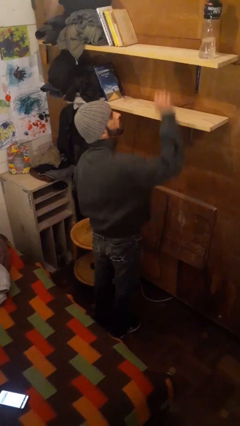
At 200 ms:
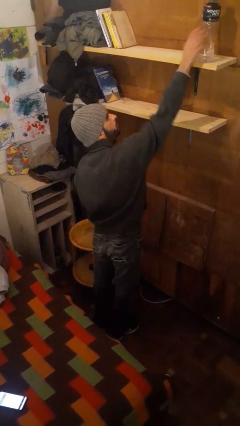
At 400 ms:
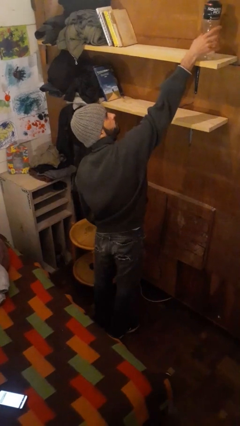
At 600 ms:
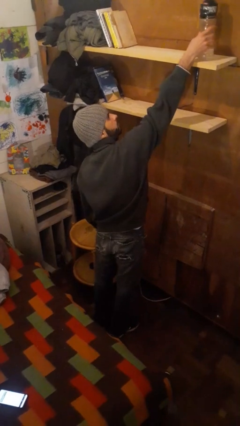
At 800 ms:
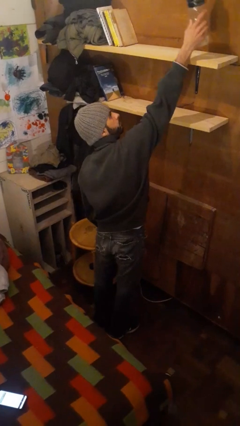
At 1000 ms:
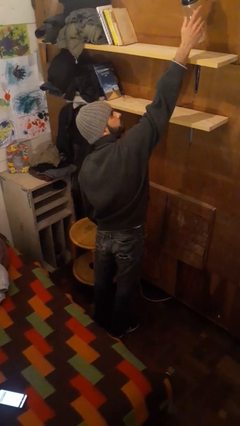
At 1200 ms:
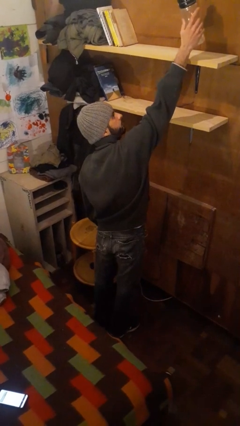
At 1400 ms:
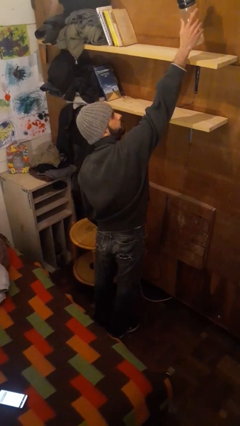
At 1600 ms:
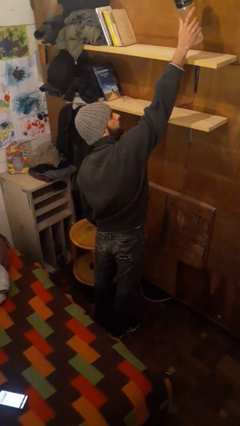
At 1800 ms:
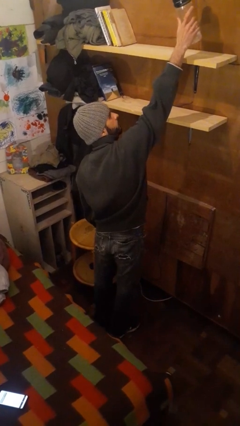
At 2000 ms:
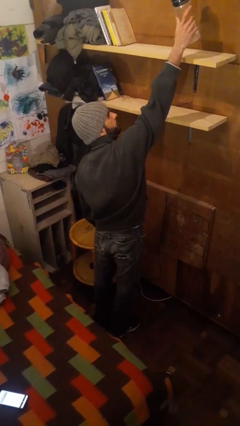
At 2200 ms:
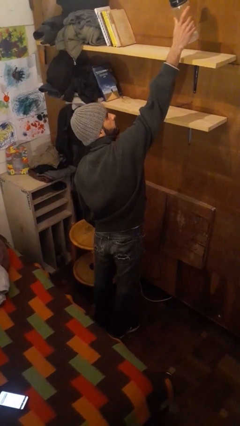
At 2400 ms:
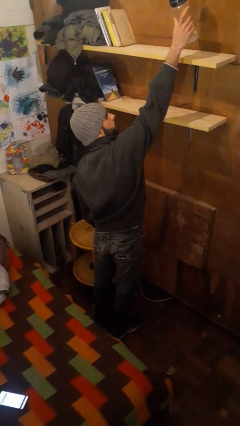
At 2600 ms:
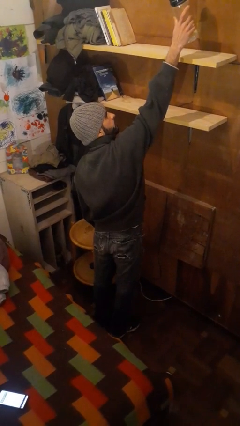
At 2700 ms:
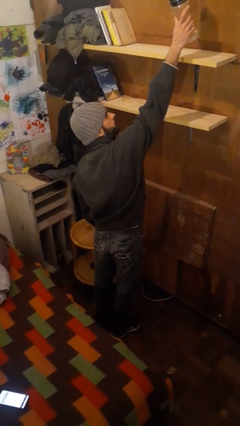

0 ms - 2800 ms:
person picks up object from shelf

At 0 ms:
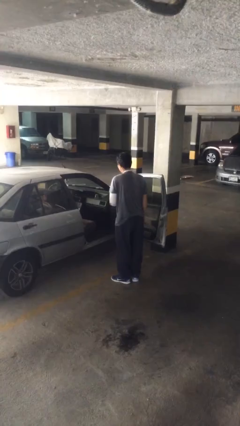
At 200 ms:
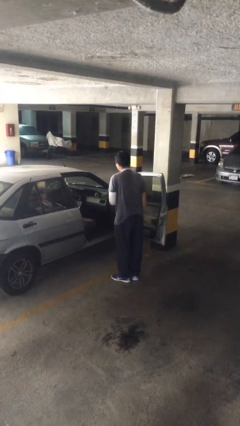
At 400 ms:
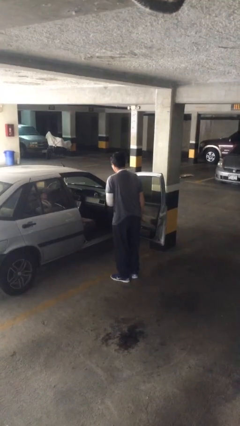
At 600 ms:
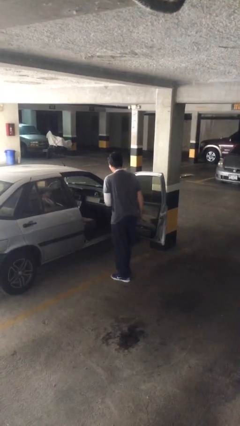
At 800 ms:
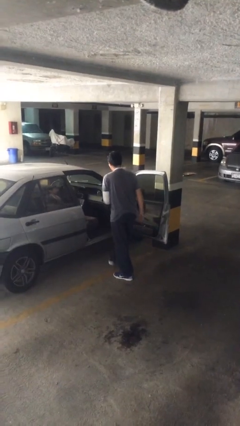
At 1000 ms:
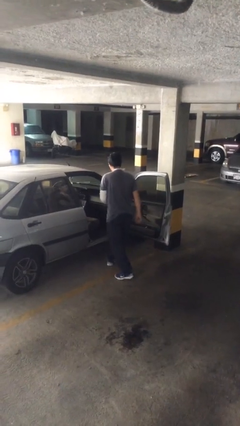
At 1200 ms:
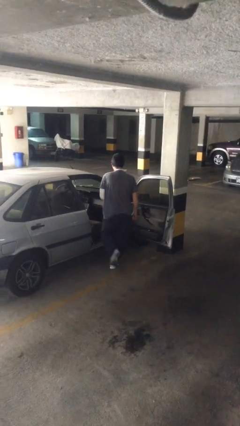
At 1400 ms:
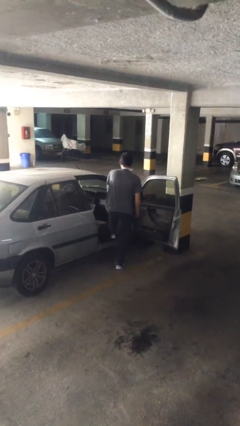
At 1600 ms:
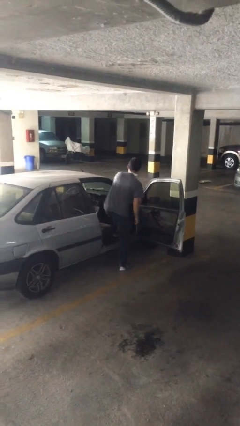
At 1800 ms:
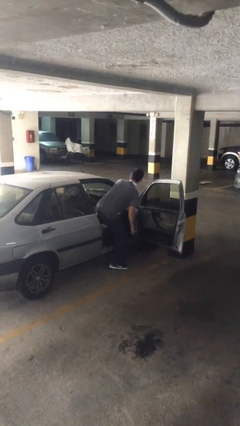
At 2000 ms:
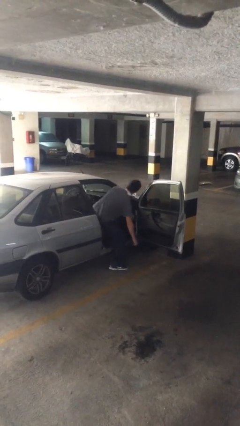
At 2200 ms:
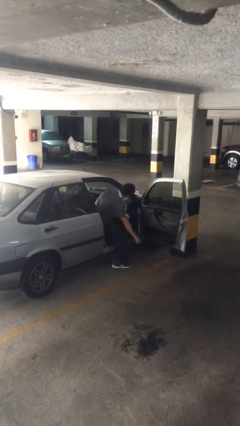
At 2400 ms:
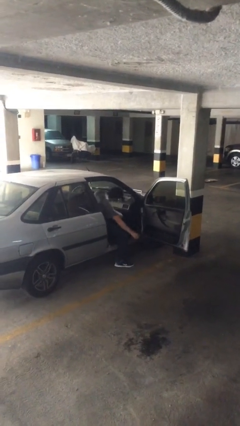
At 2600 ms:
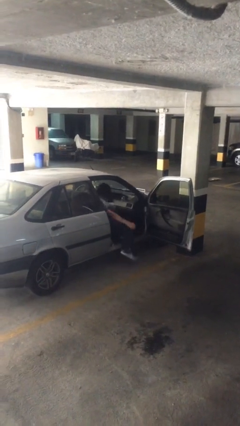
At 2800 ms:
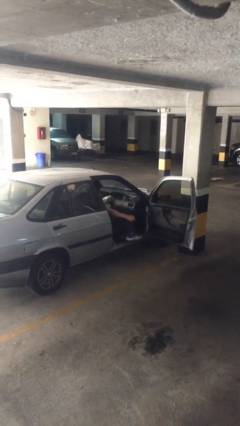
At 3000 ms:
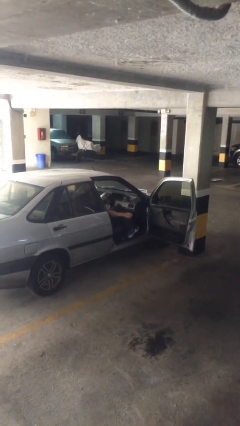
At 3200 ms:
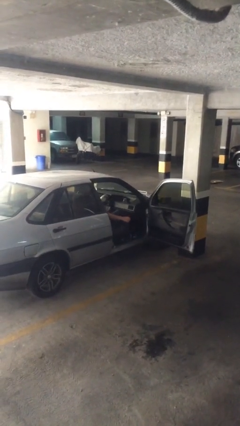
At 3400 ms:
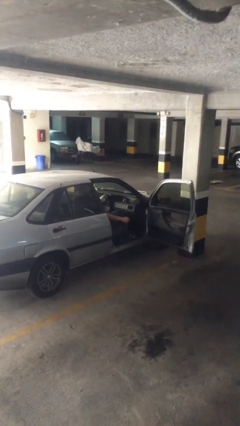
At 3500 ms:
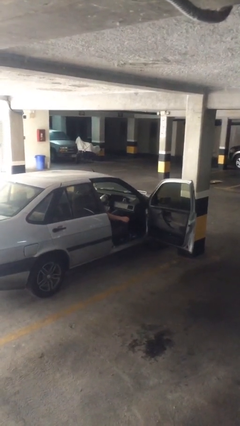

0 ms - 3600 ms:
person enters car

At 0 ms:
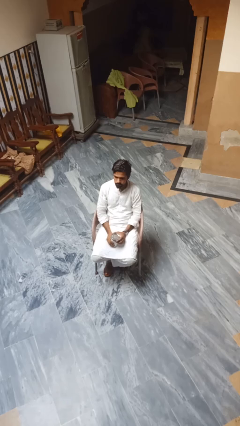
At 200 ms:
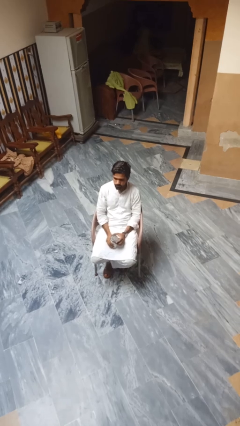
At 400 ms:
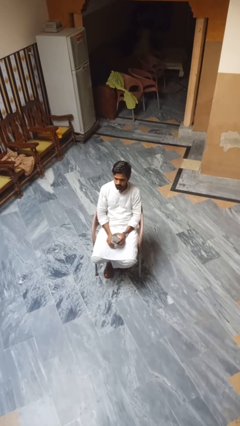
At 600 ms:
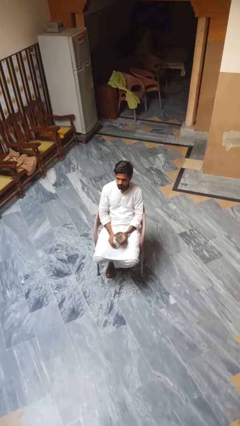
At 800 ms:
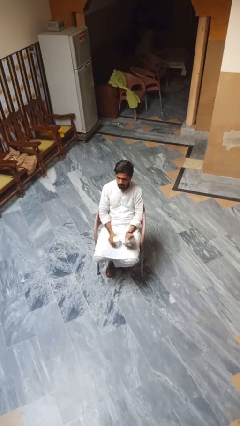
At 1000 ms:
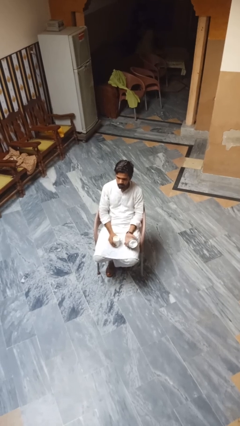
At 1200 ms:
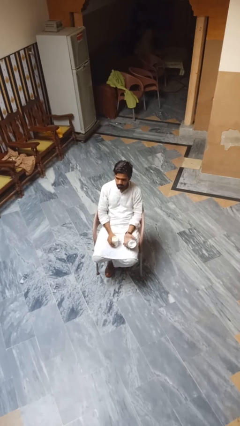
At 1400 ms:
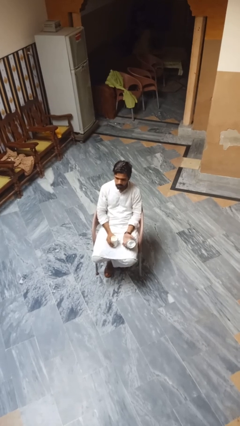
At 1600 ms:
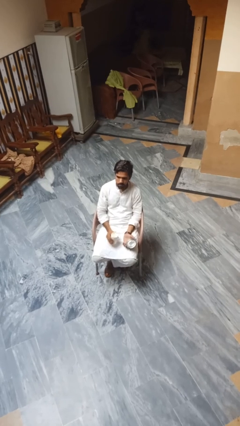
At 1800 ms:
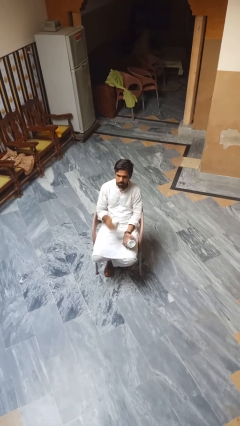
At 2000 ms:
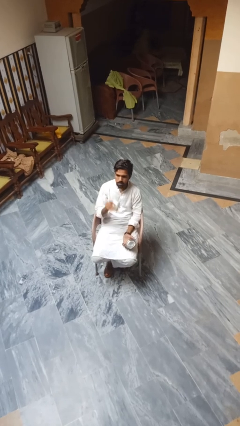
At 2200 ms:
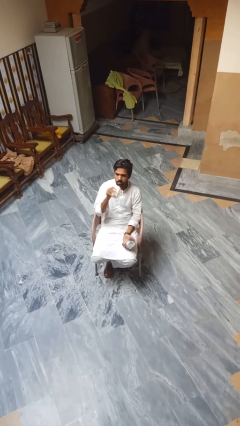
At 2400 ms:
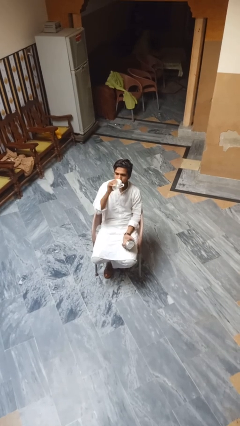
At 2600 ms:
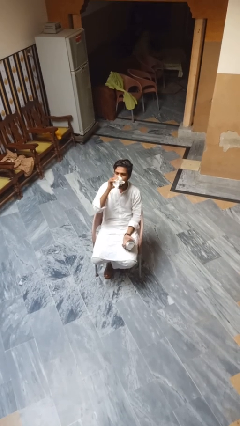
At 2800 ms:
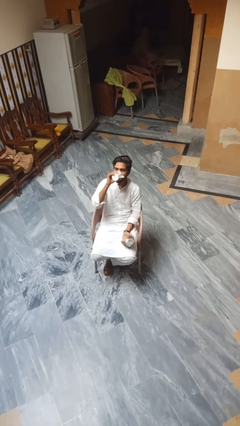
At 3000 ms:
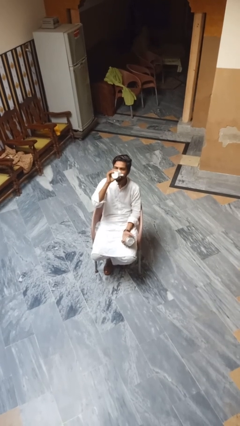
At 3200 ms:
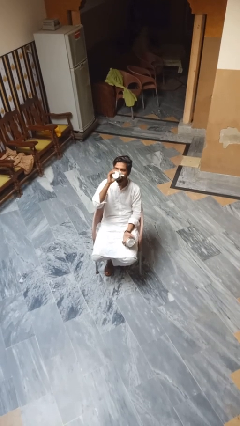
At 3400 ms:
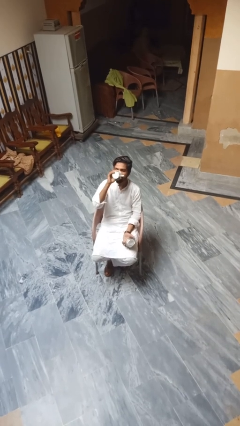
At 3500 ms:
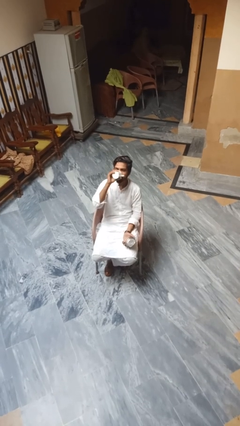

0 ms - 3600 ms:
person opens beverage can

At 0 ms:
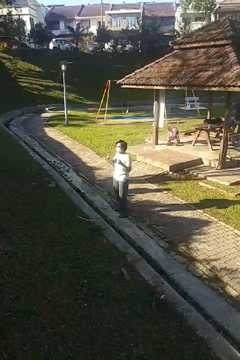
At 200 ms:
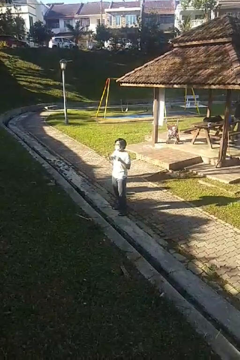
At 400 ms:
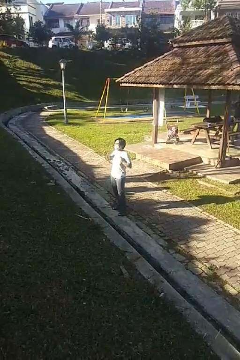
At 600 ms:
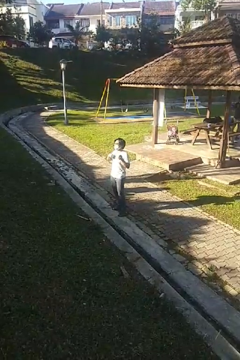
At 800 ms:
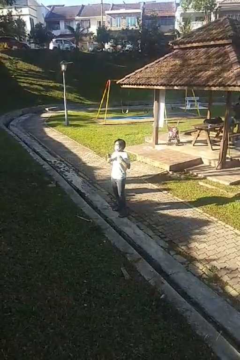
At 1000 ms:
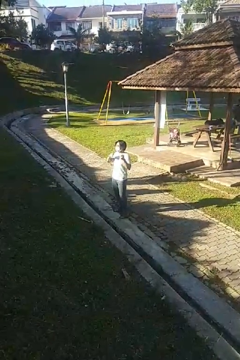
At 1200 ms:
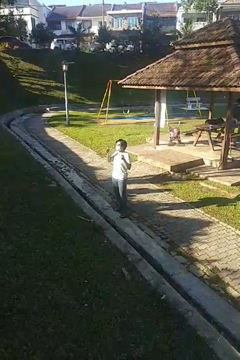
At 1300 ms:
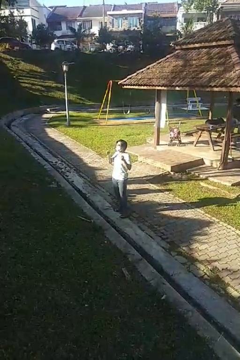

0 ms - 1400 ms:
person drums on chest

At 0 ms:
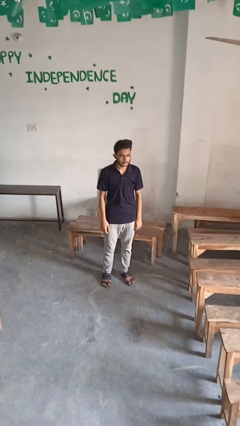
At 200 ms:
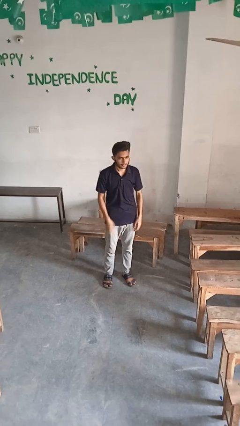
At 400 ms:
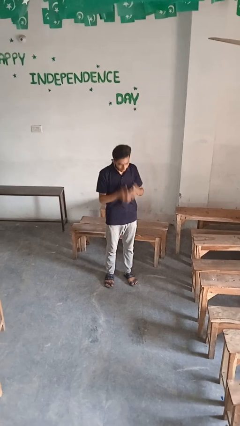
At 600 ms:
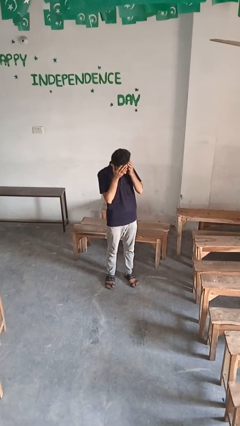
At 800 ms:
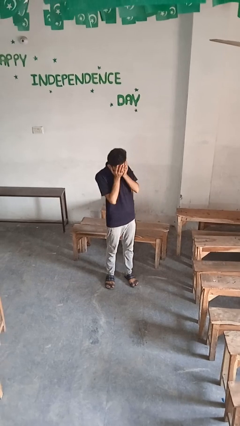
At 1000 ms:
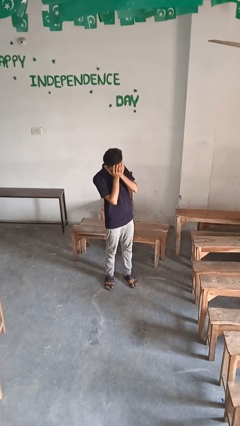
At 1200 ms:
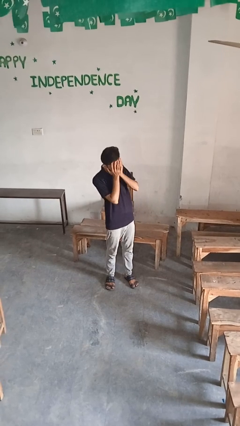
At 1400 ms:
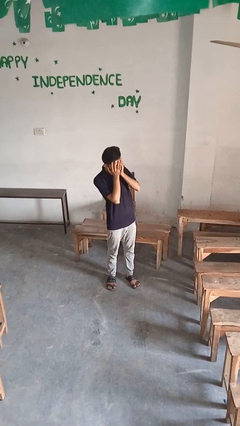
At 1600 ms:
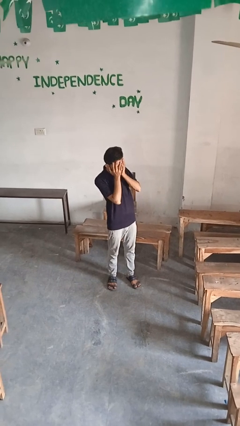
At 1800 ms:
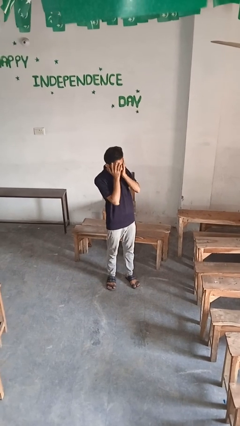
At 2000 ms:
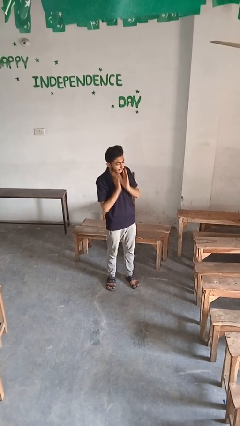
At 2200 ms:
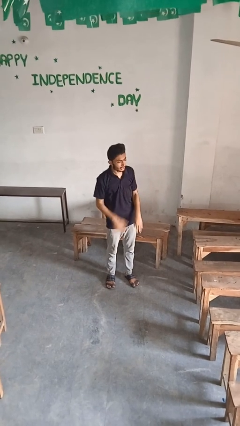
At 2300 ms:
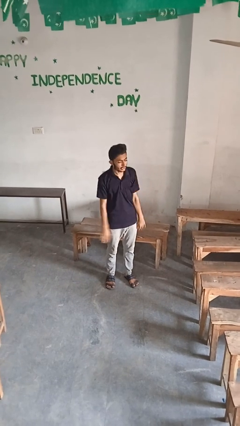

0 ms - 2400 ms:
person covers face with hands

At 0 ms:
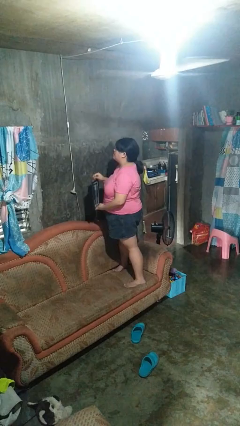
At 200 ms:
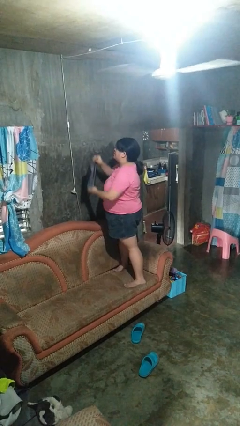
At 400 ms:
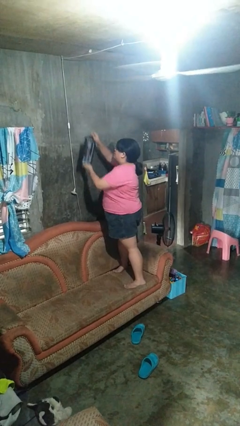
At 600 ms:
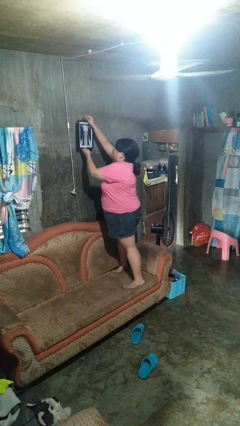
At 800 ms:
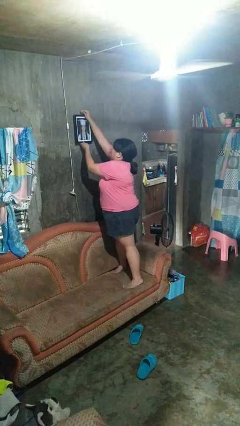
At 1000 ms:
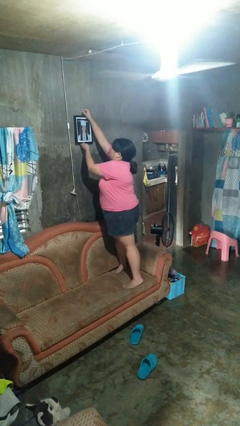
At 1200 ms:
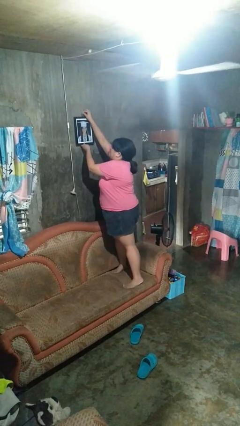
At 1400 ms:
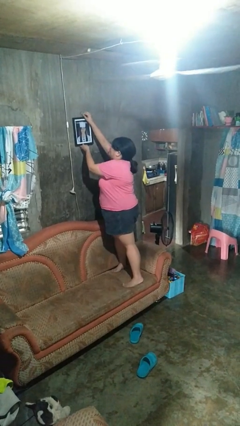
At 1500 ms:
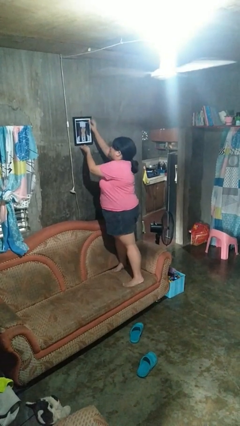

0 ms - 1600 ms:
person puts up picture frame

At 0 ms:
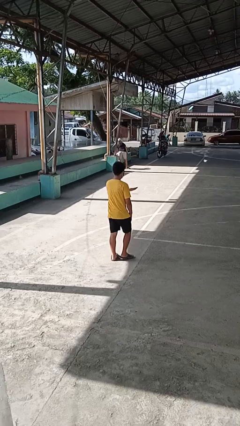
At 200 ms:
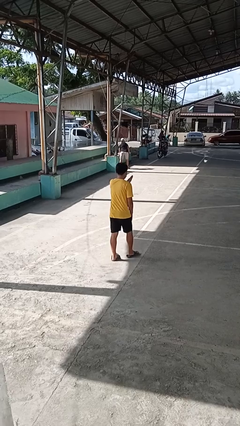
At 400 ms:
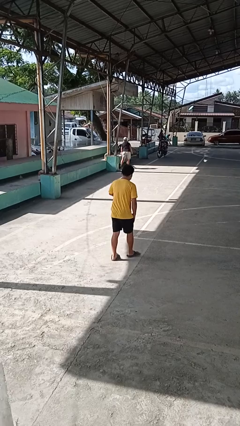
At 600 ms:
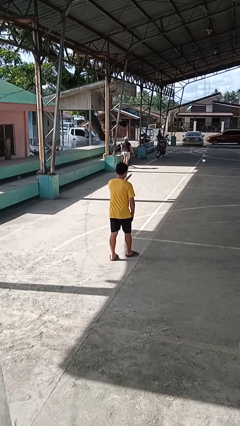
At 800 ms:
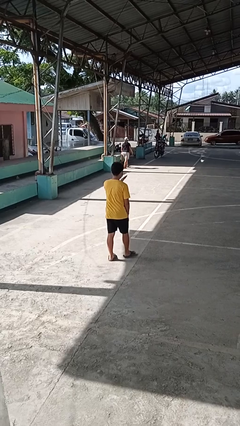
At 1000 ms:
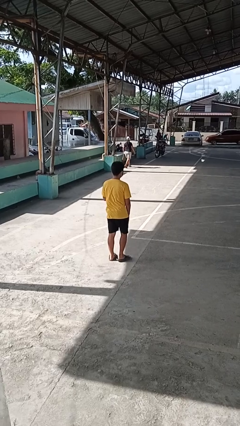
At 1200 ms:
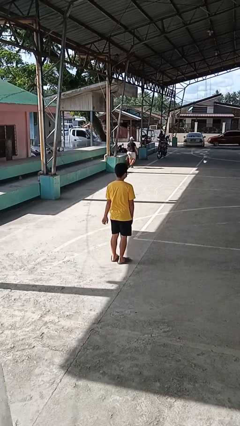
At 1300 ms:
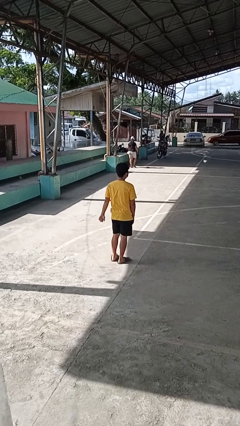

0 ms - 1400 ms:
person karate chop

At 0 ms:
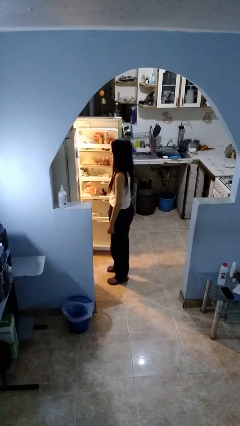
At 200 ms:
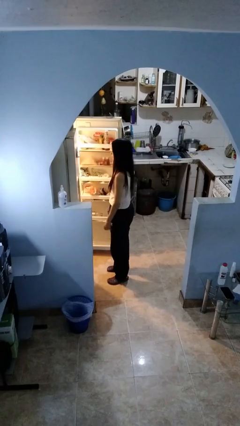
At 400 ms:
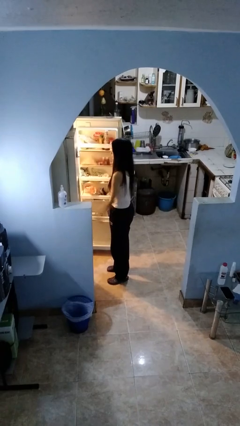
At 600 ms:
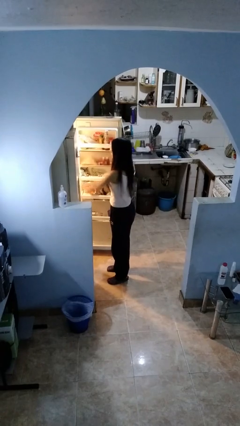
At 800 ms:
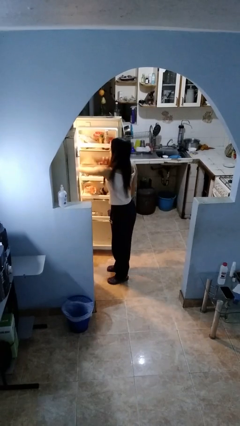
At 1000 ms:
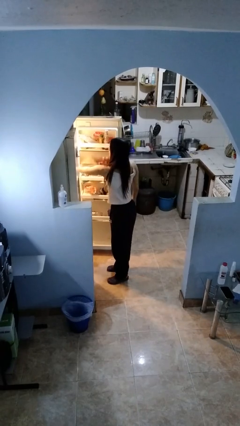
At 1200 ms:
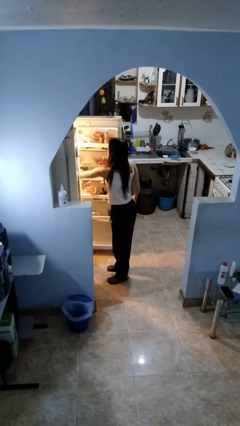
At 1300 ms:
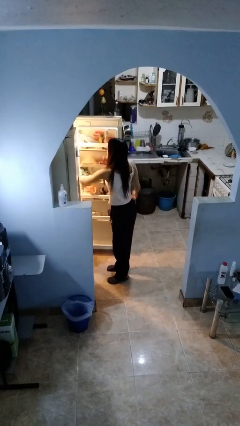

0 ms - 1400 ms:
person takes object from refrigerator
